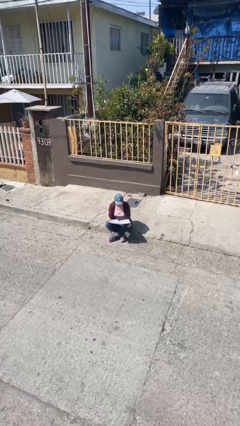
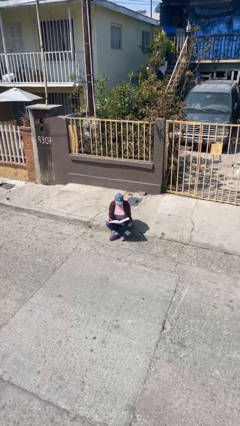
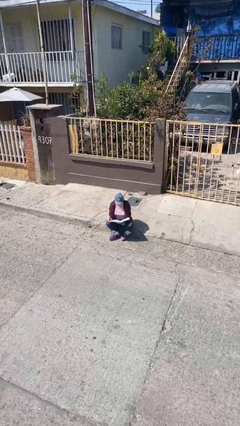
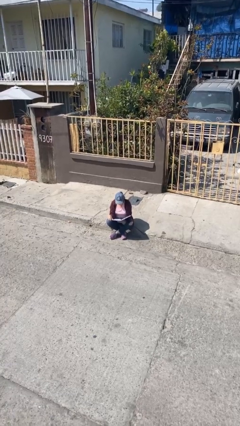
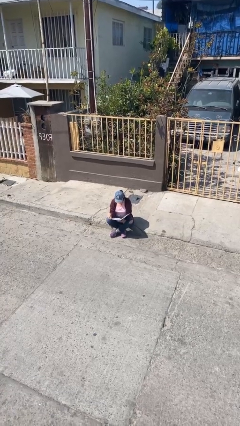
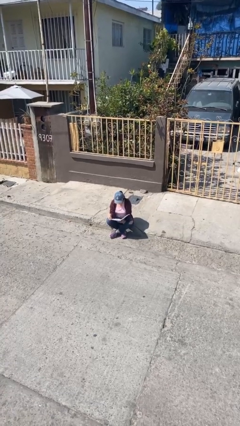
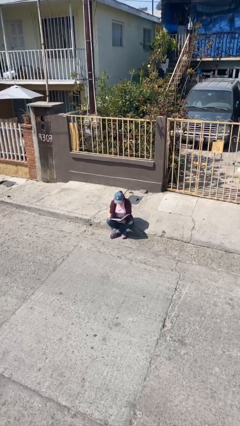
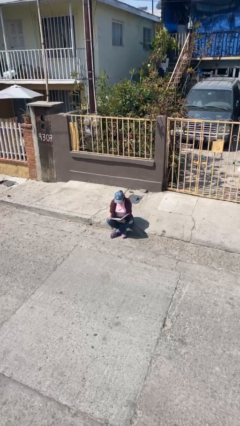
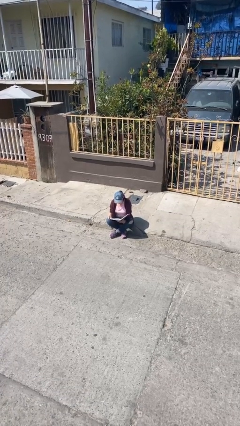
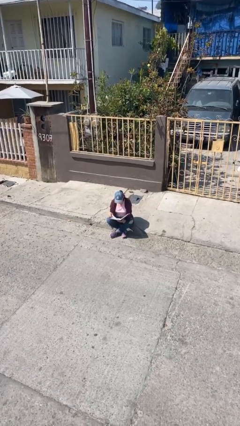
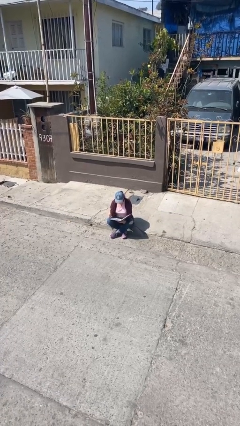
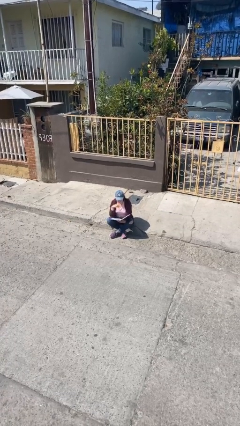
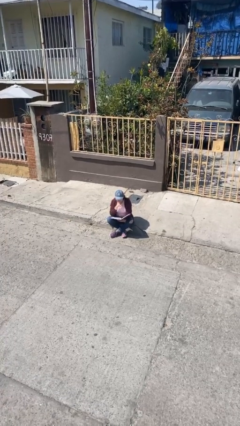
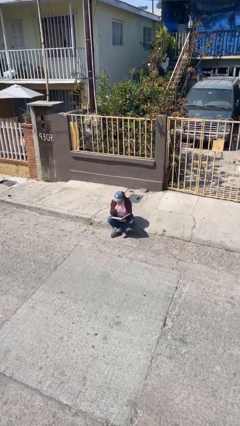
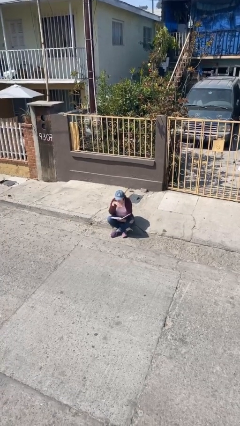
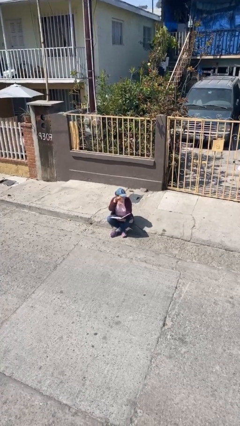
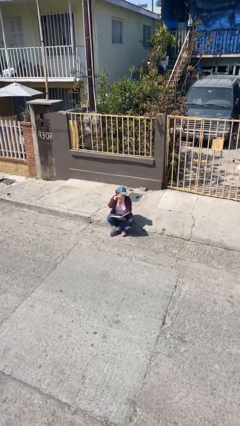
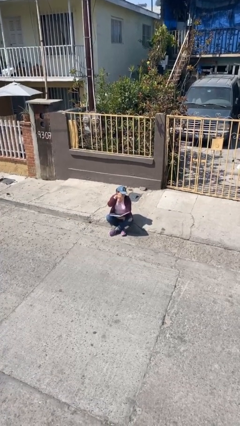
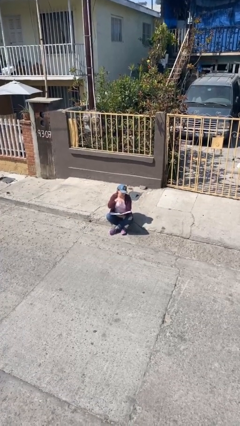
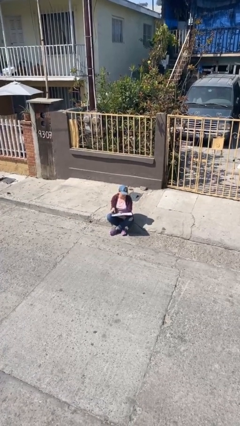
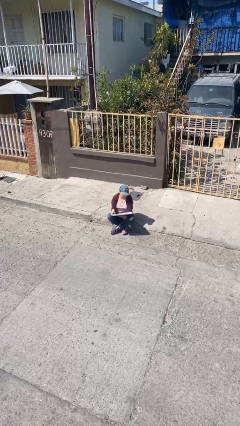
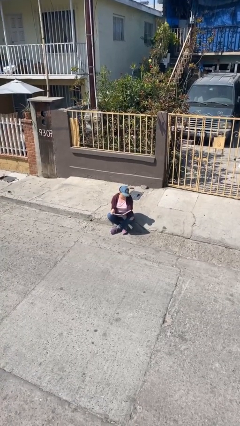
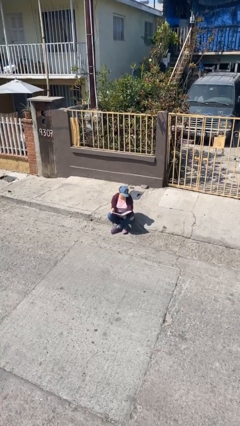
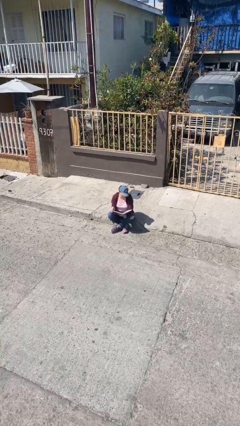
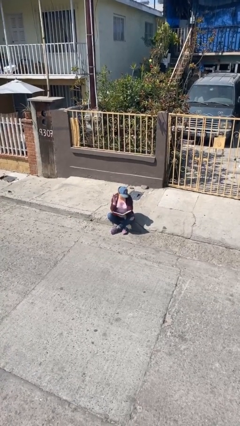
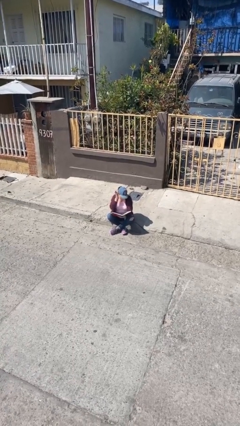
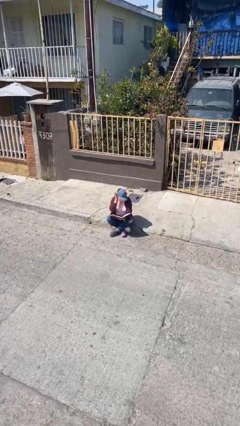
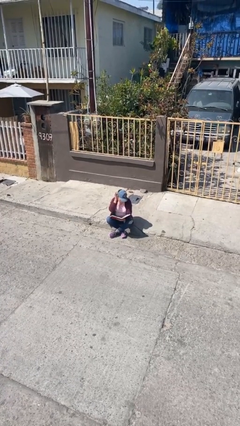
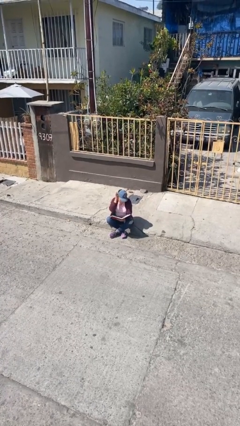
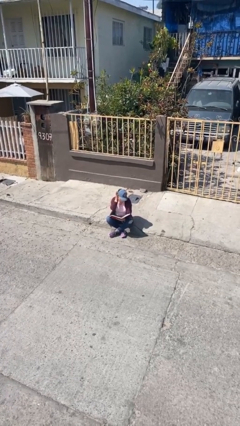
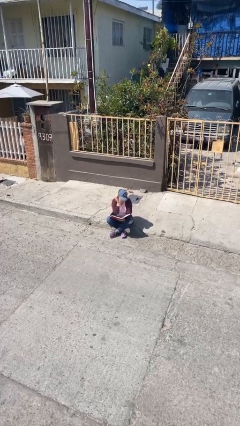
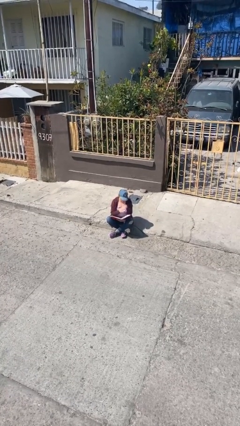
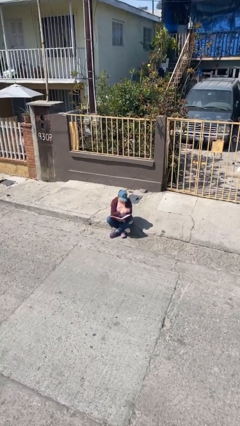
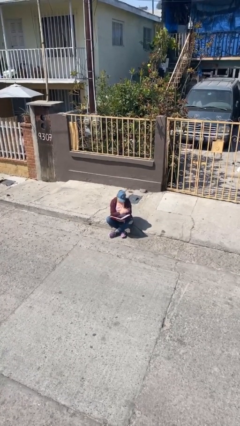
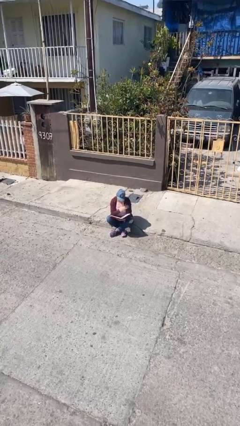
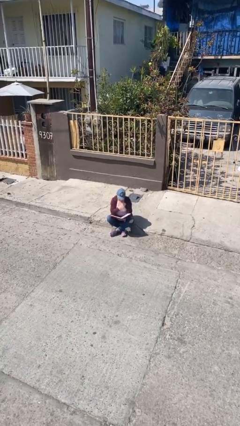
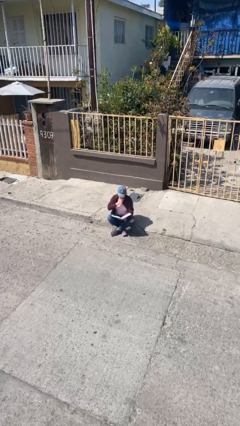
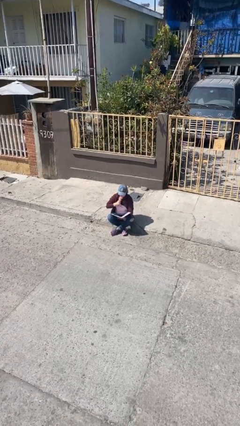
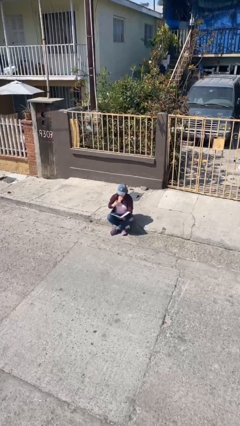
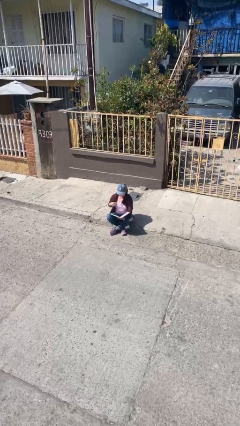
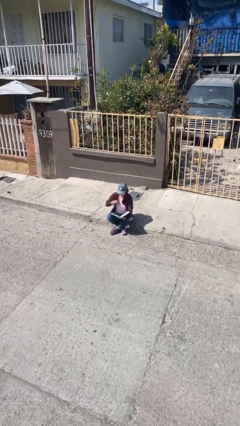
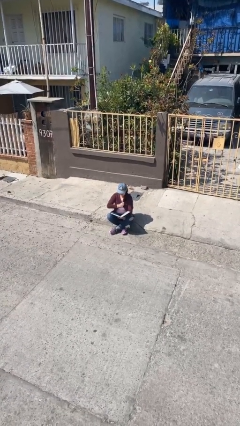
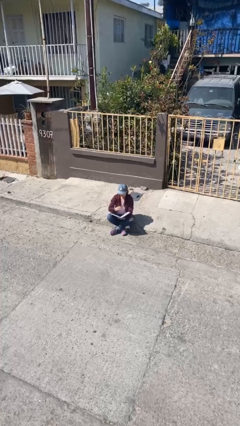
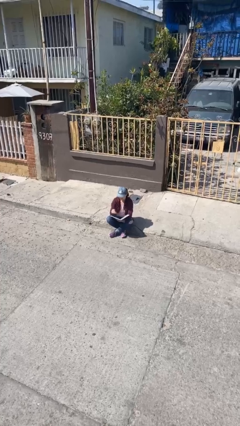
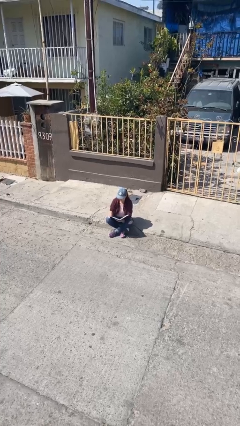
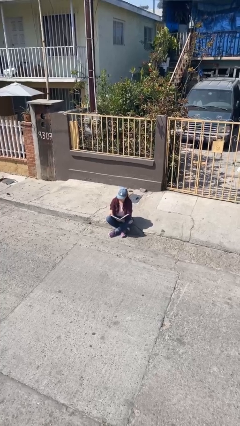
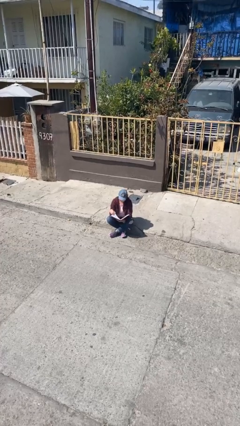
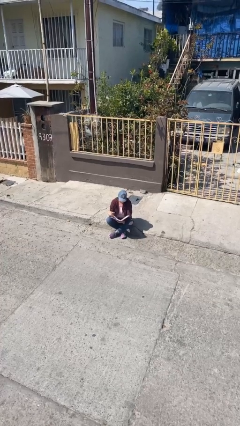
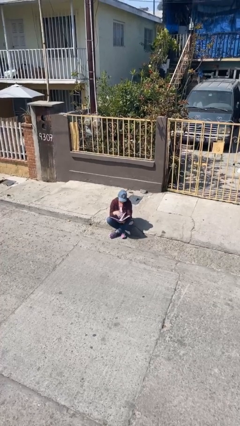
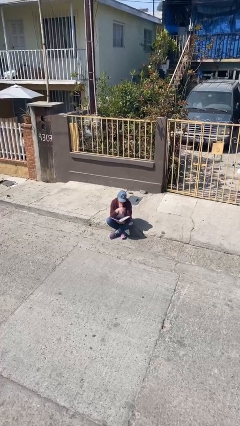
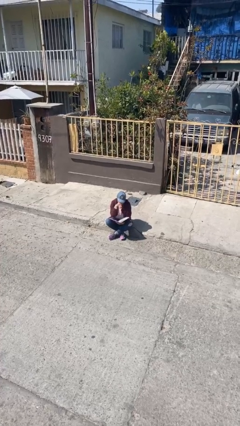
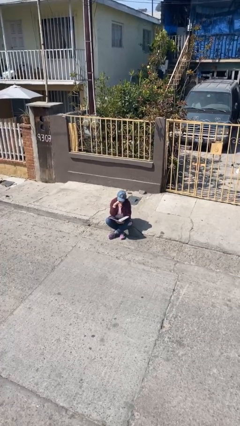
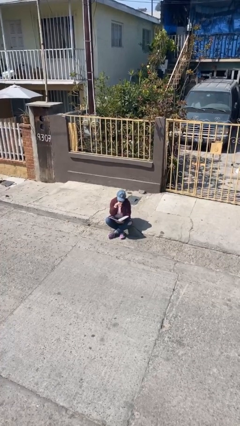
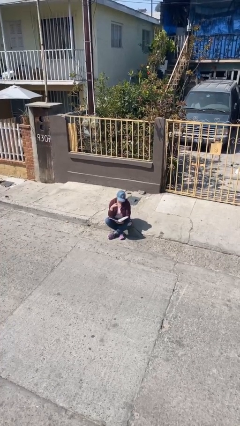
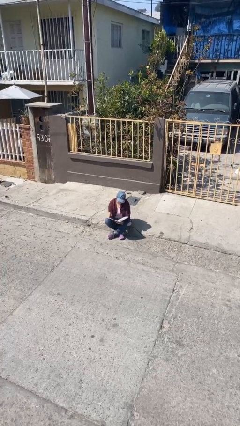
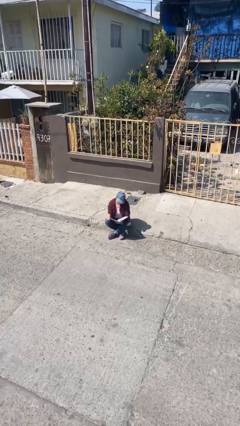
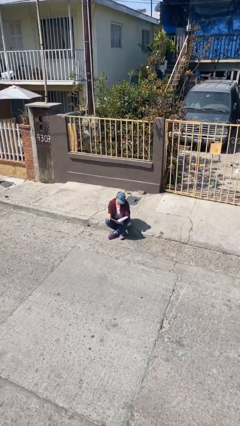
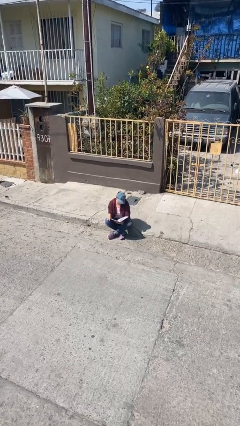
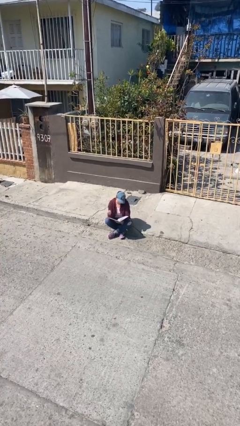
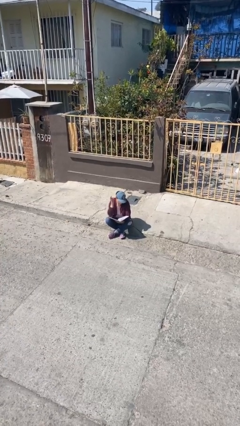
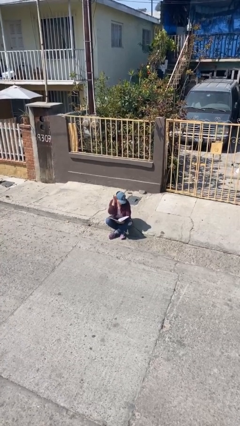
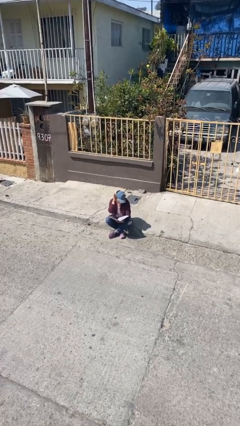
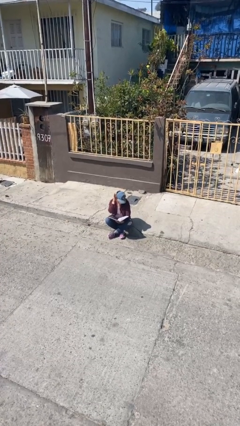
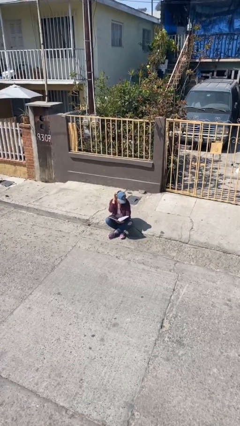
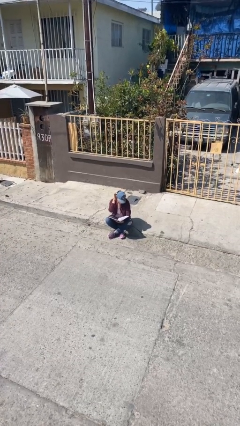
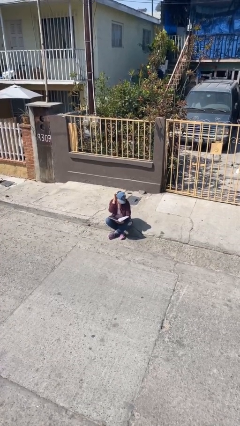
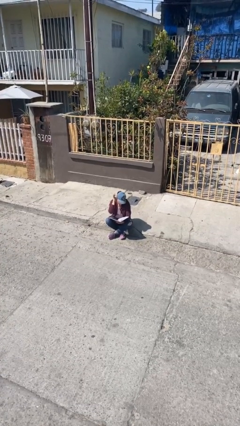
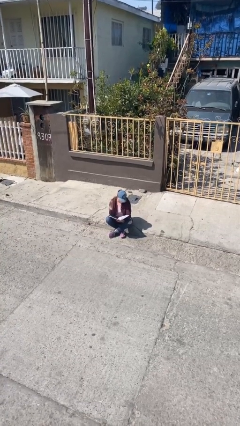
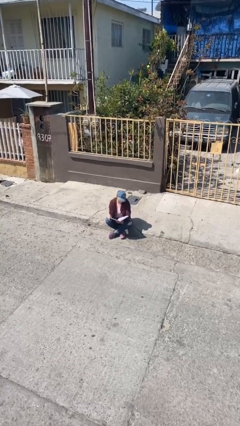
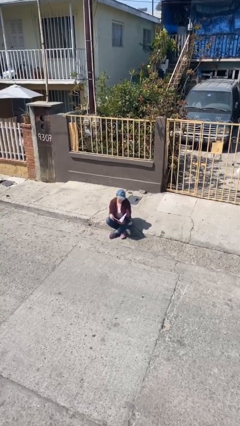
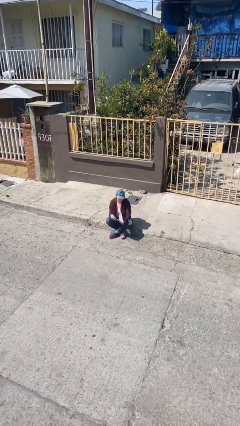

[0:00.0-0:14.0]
person reads document

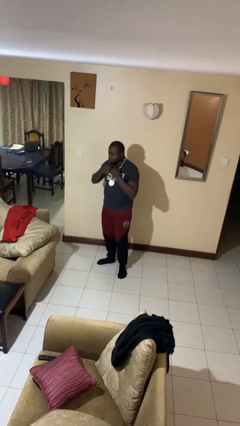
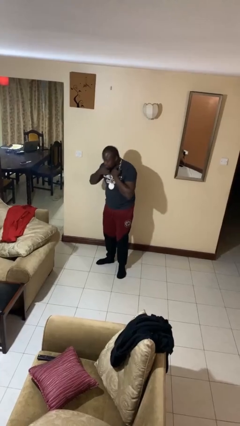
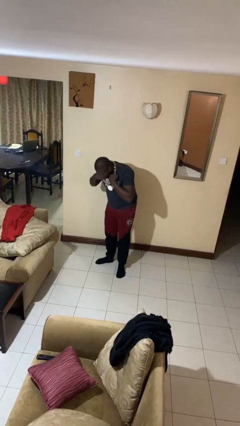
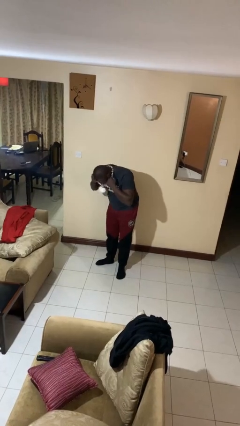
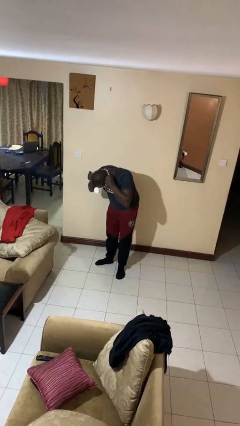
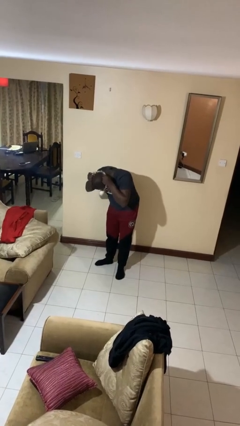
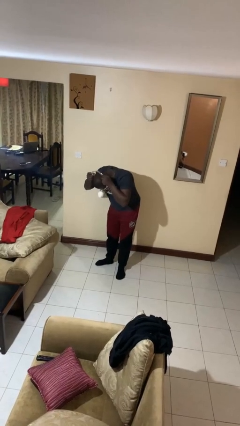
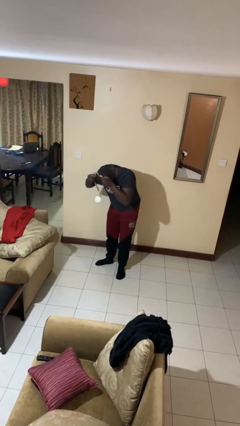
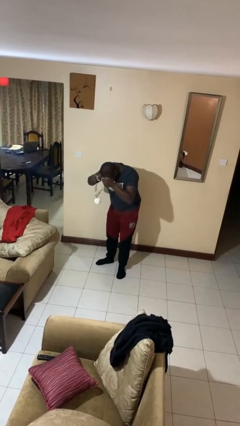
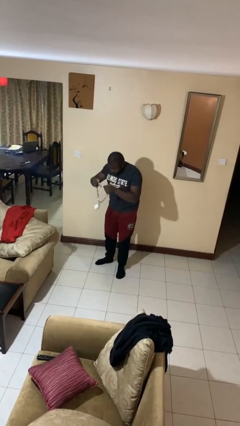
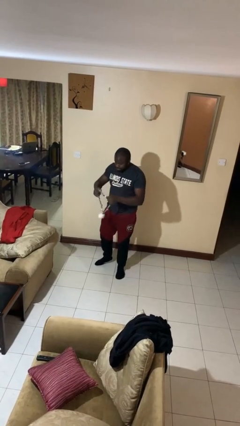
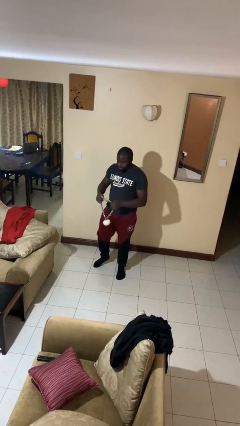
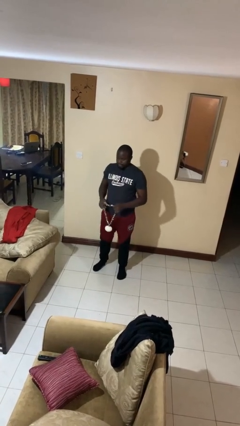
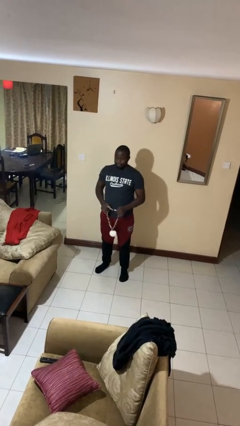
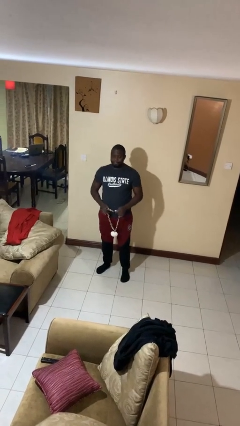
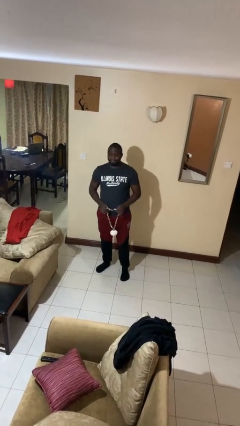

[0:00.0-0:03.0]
person takes off necklace

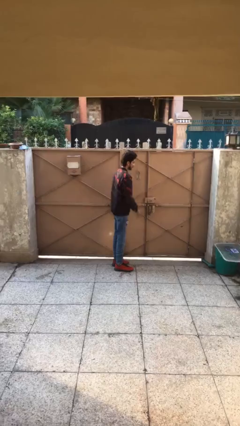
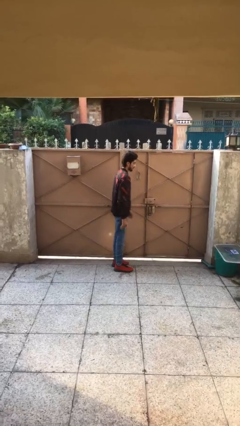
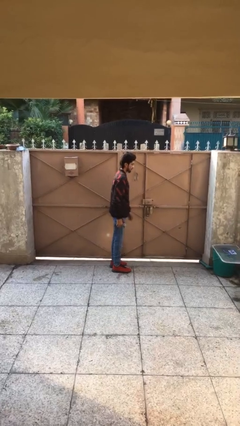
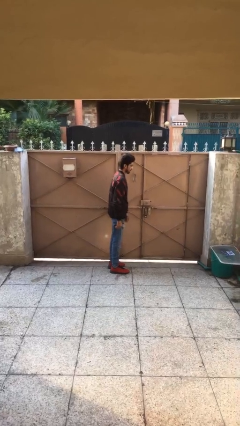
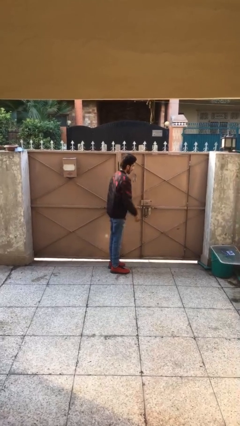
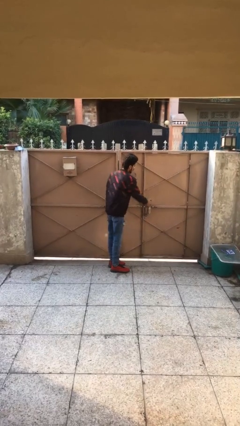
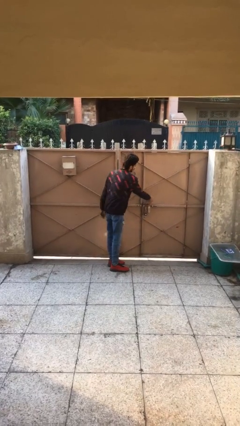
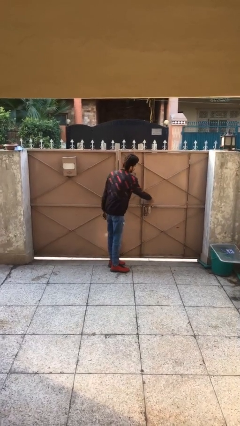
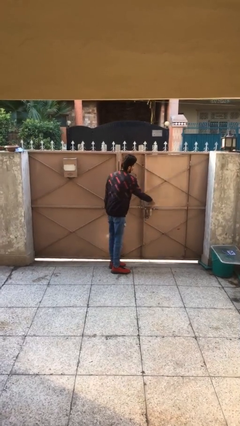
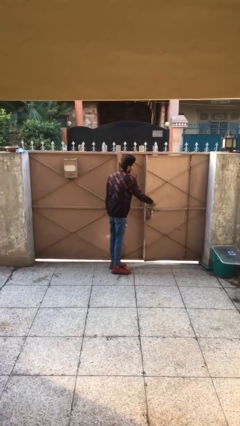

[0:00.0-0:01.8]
person opens facility door
